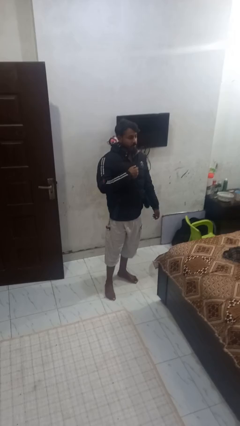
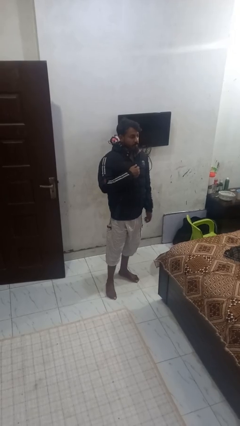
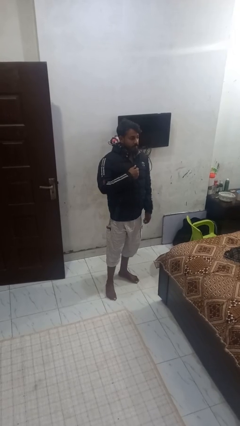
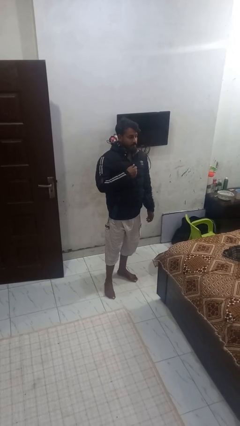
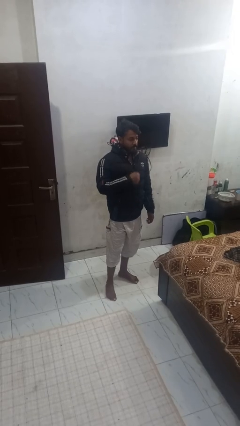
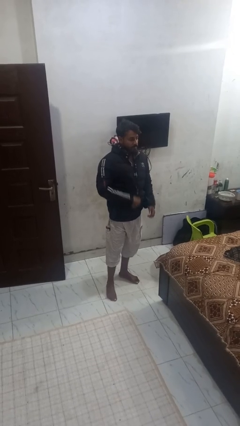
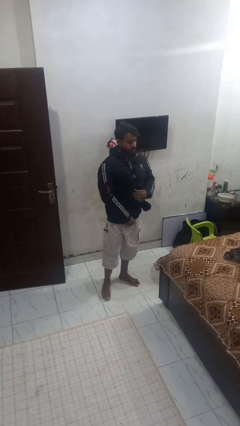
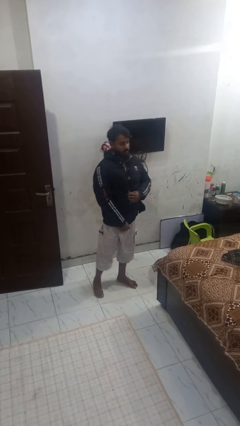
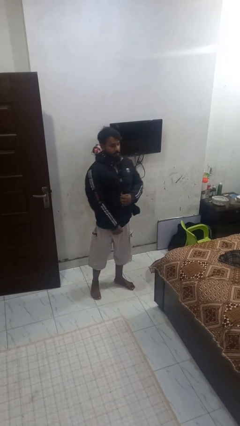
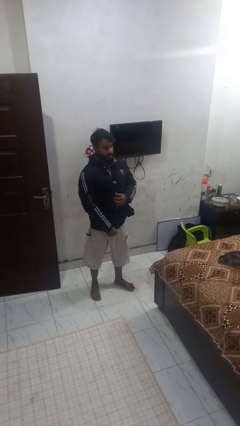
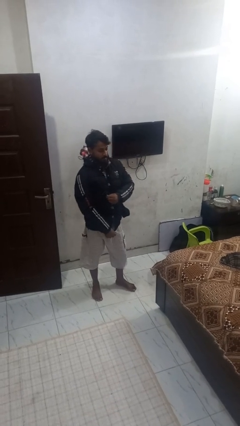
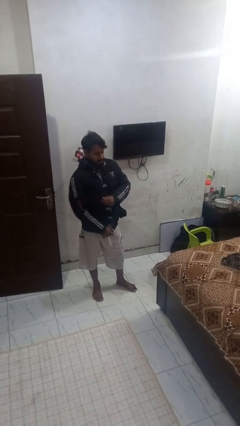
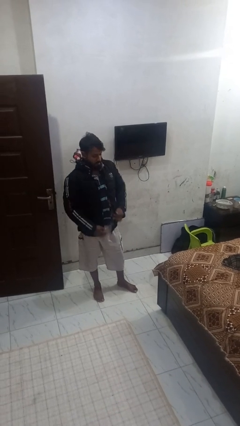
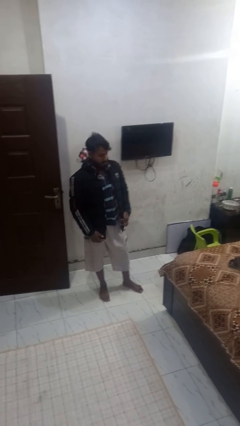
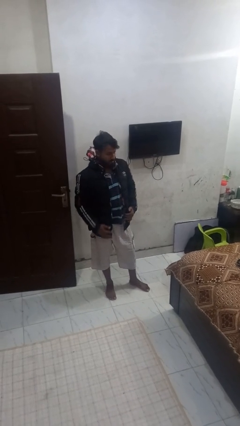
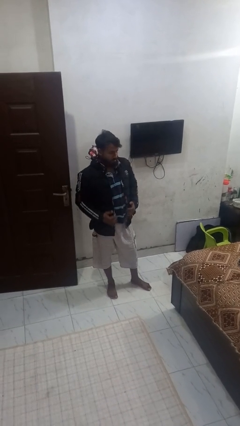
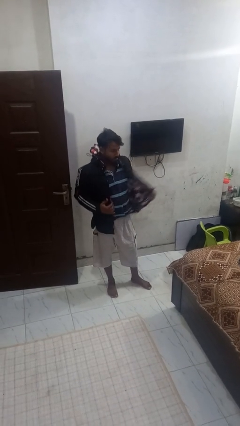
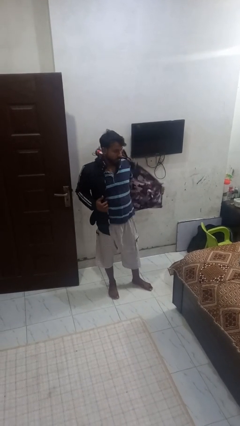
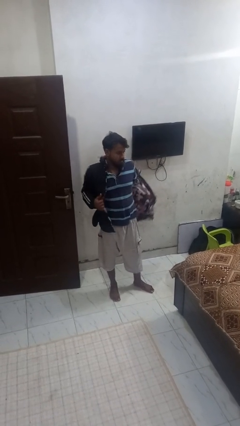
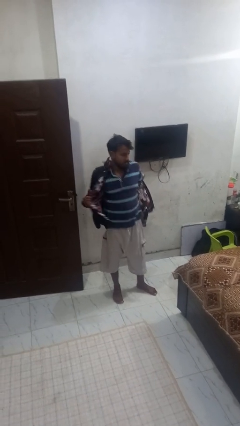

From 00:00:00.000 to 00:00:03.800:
person unzips jacket

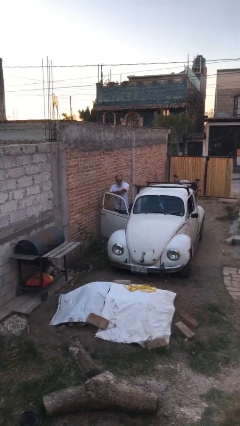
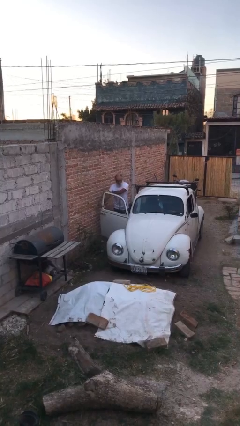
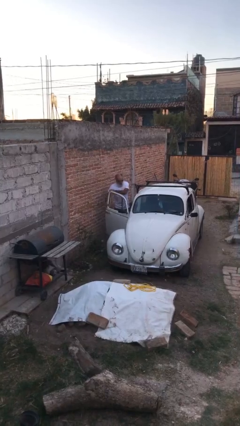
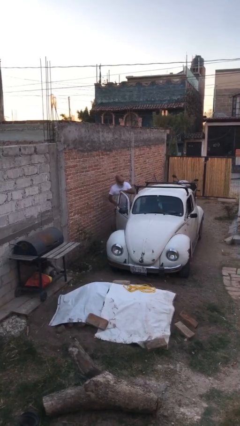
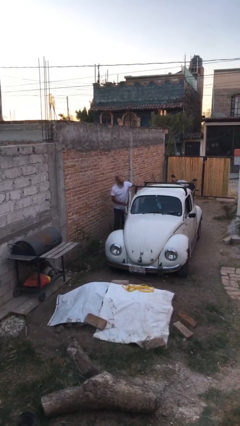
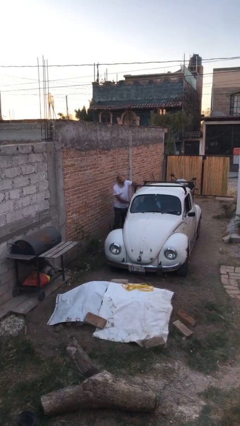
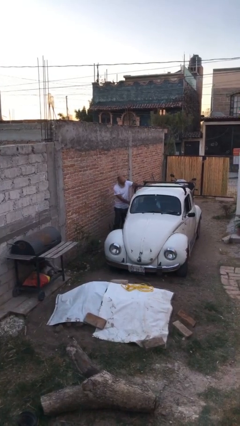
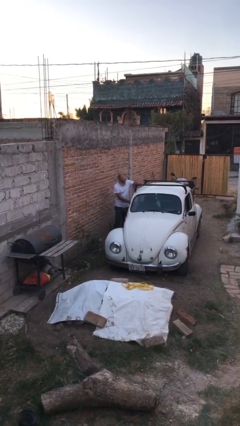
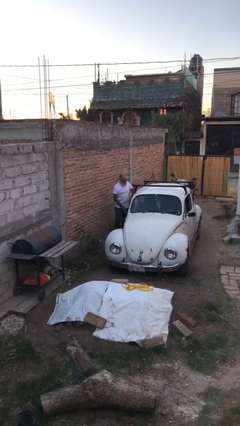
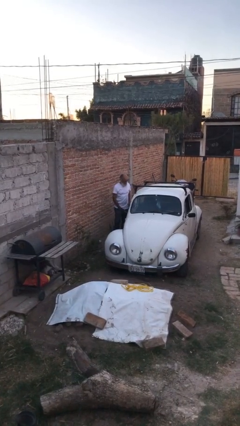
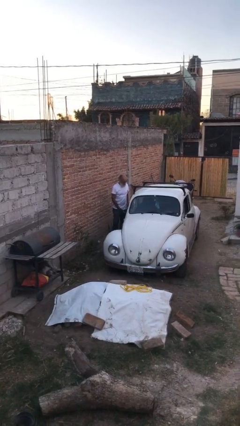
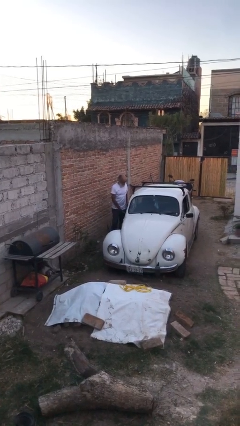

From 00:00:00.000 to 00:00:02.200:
person closes car door

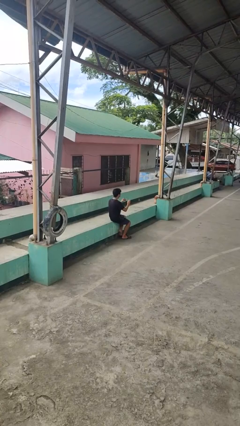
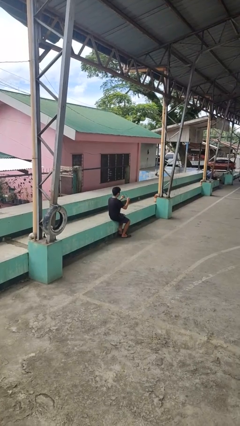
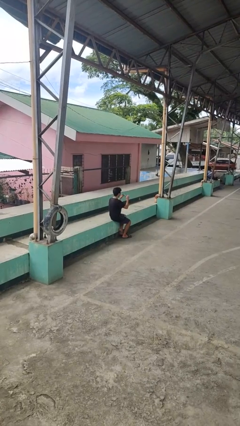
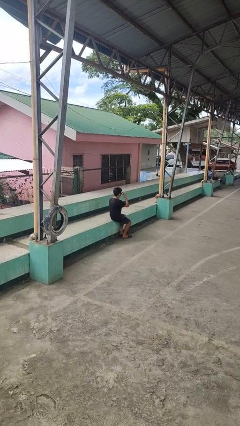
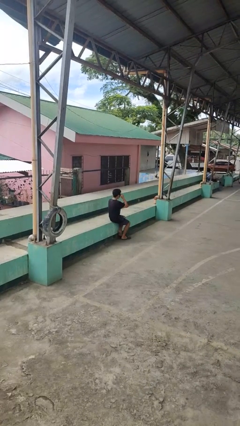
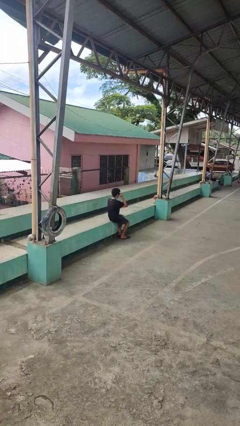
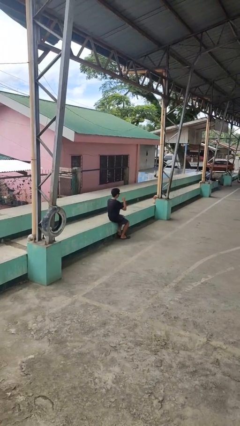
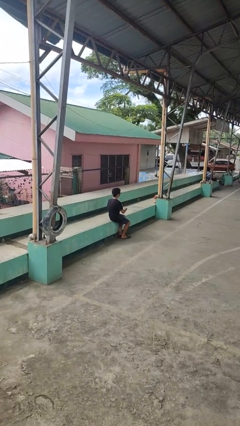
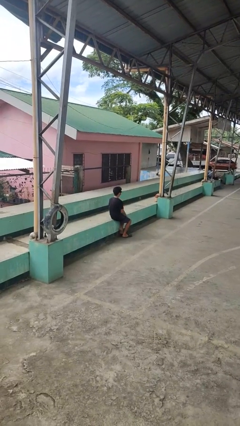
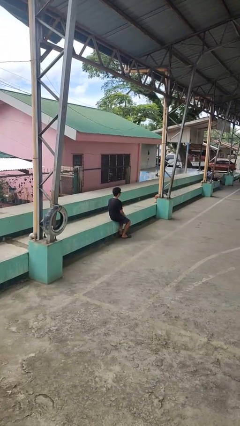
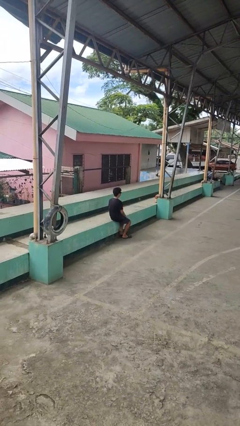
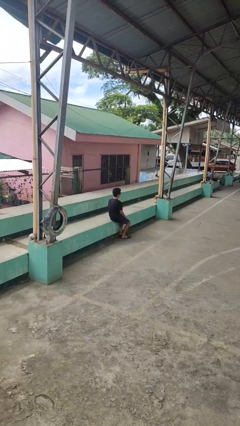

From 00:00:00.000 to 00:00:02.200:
person puts on sunglasses

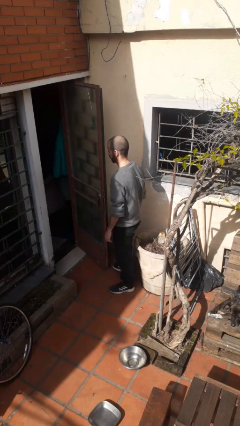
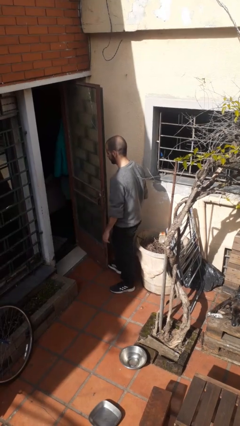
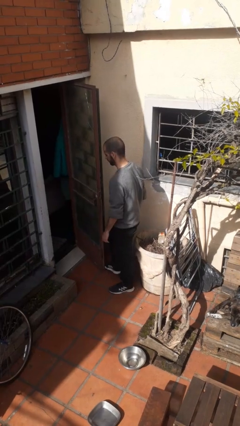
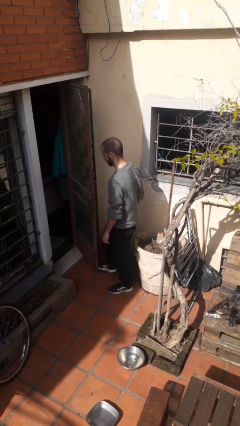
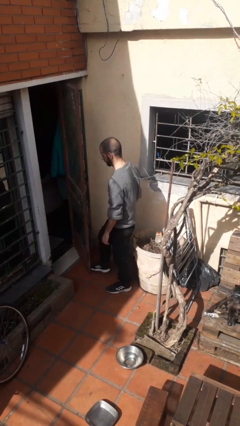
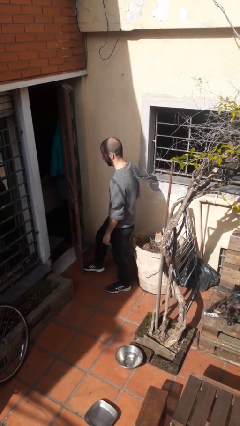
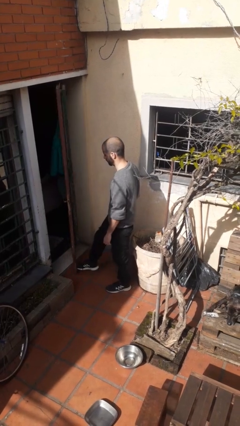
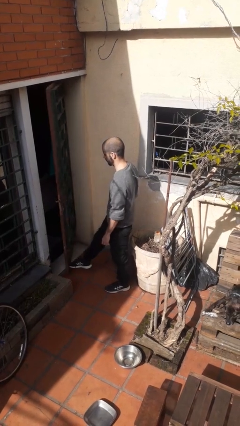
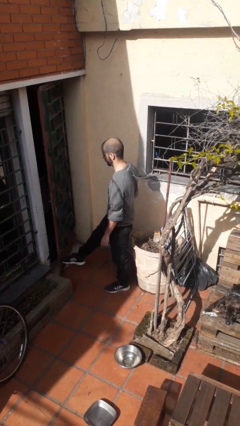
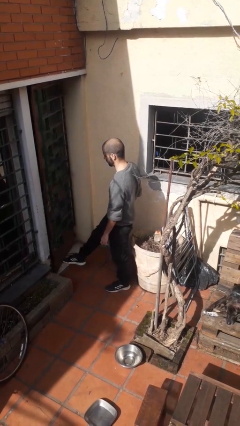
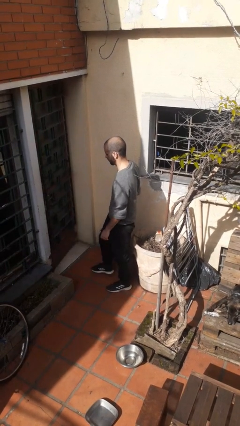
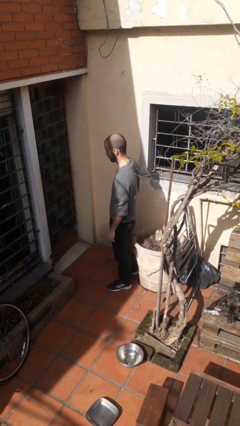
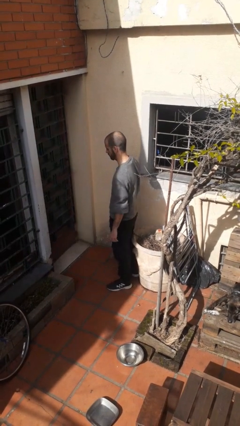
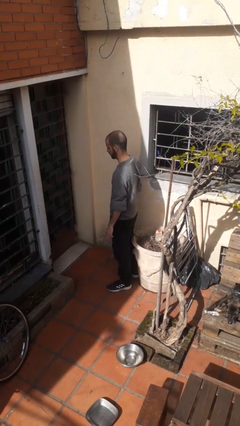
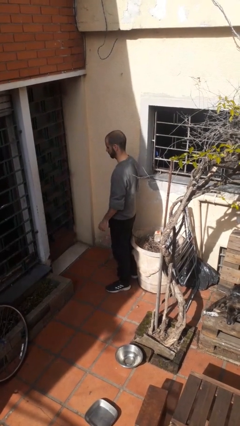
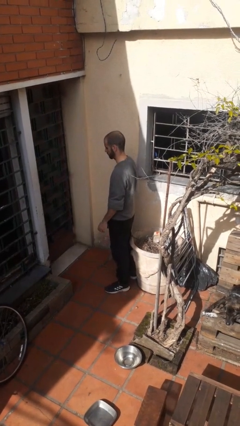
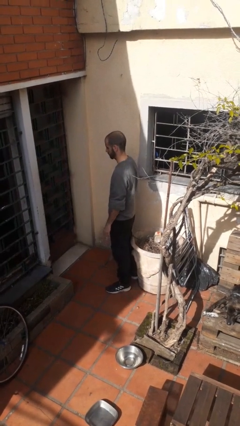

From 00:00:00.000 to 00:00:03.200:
person closes door with foot

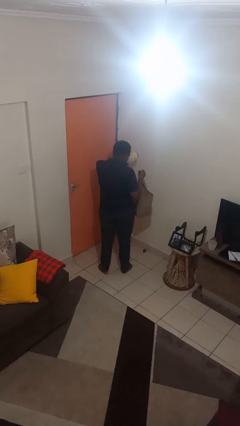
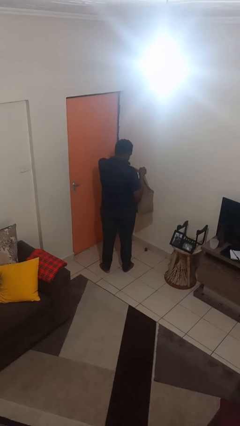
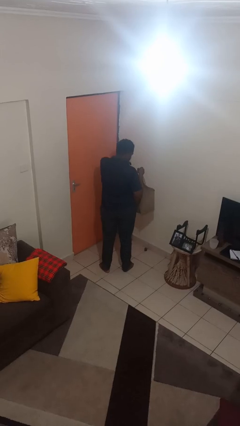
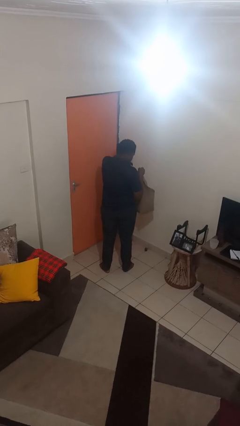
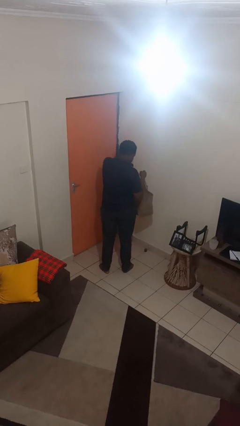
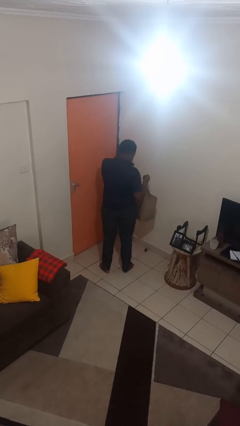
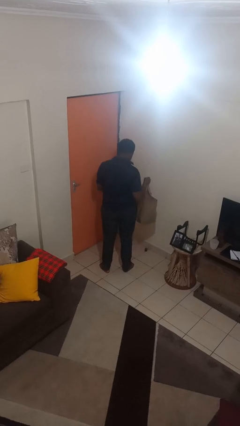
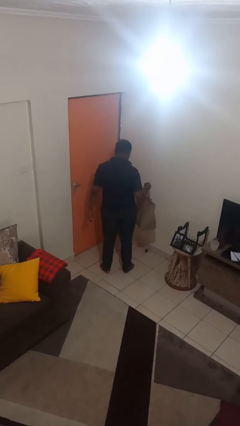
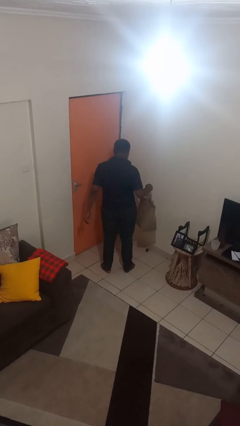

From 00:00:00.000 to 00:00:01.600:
person puts object into bag

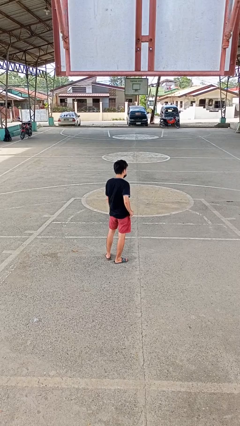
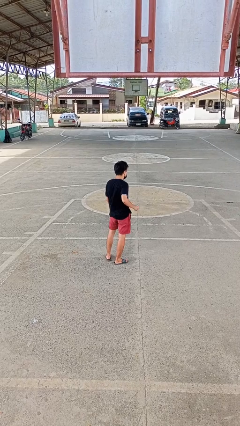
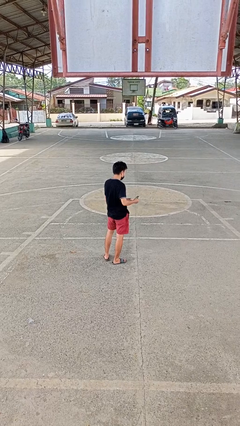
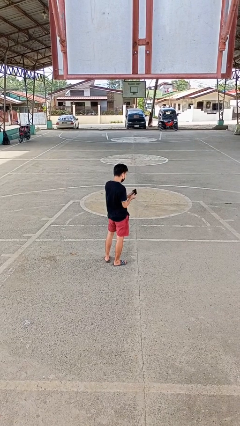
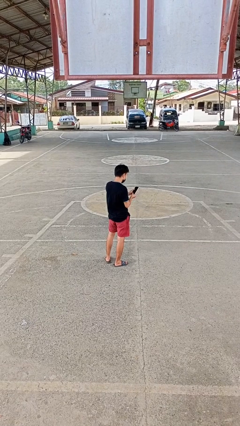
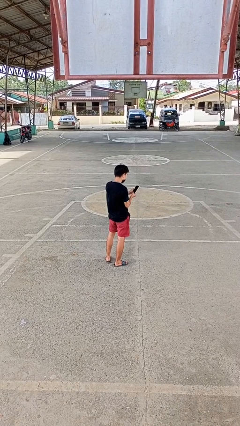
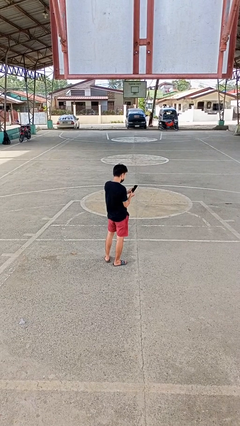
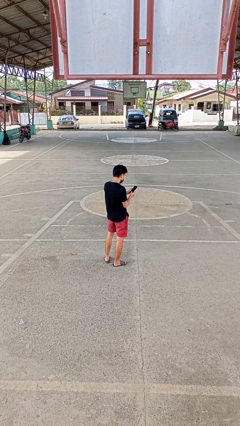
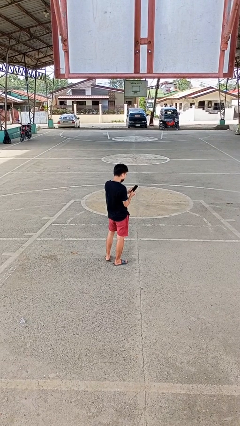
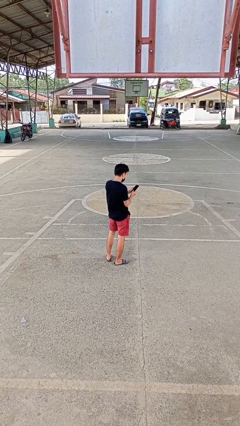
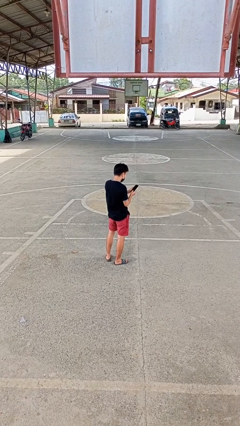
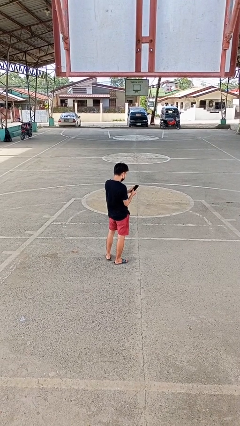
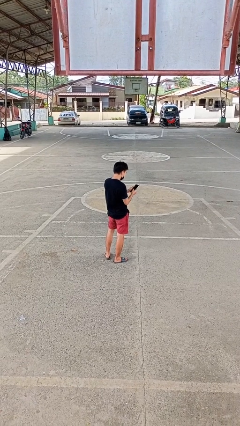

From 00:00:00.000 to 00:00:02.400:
person takes phone from pocket

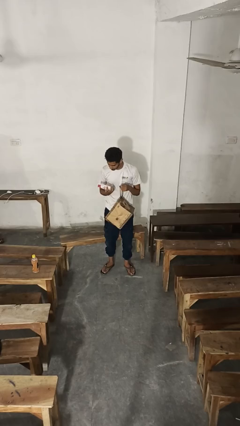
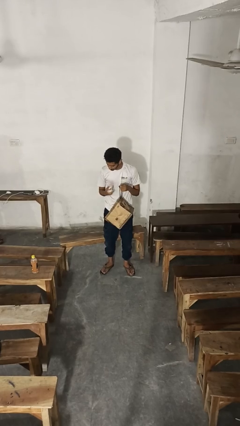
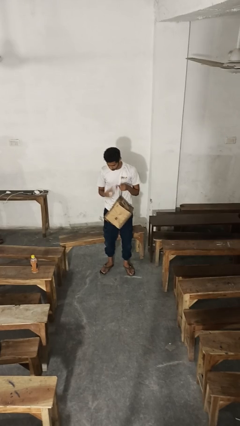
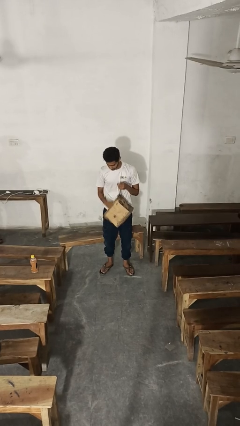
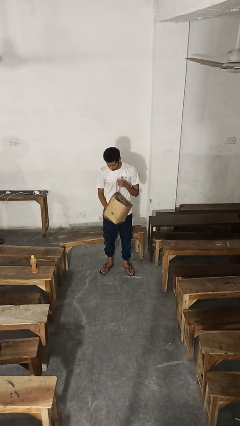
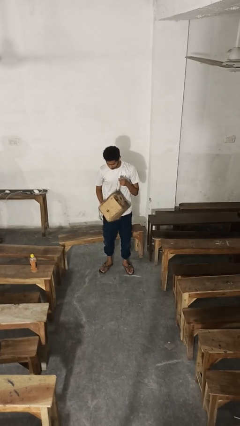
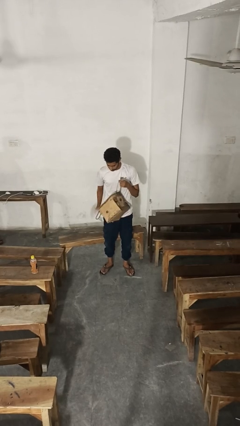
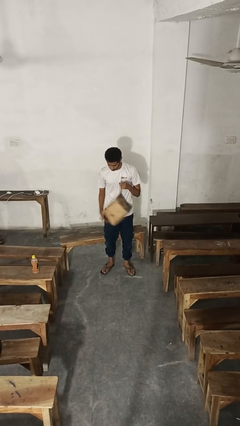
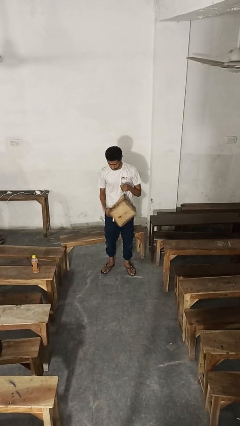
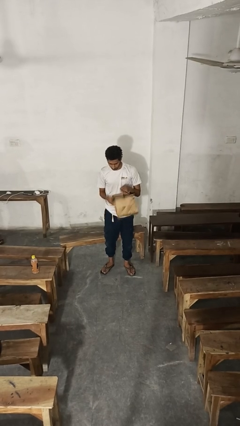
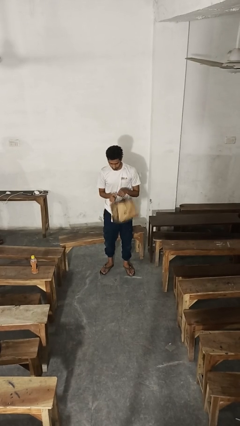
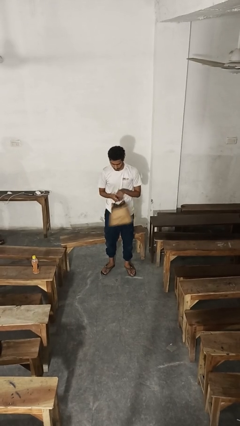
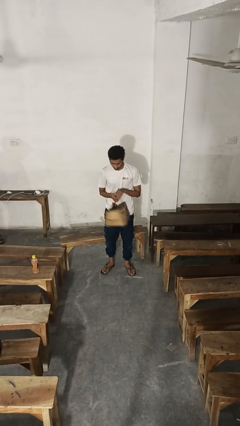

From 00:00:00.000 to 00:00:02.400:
person puts object into purse
